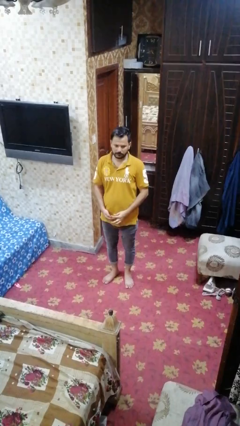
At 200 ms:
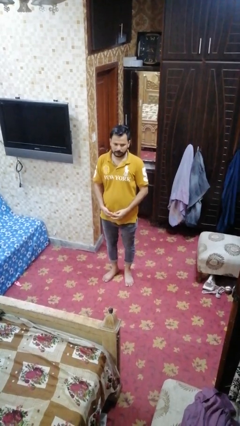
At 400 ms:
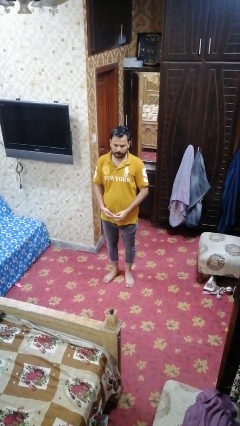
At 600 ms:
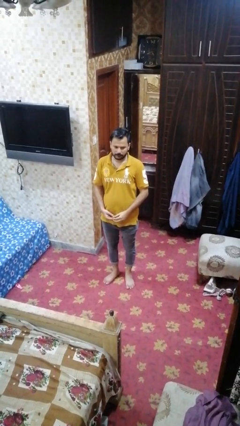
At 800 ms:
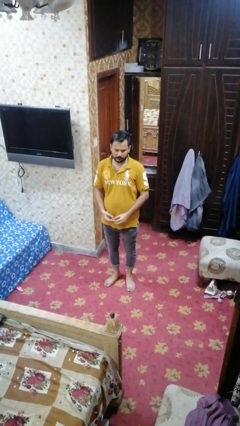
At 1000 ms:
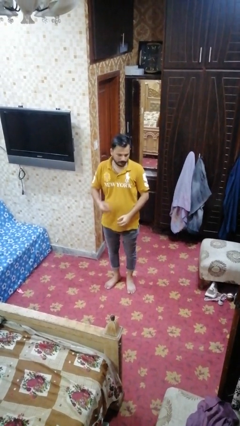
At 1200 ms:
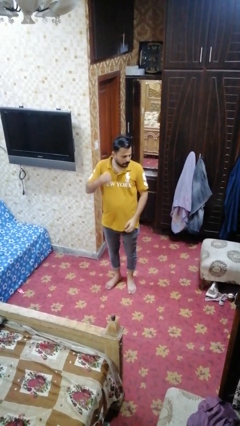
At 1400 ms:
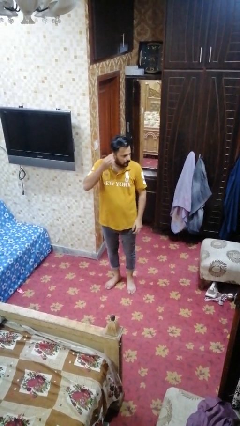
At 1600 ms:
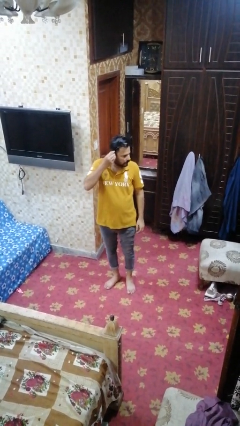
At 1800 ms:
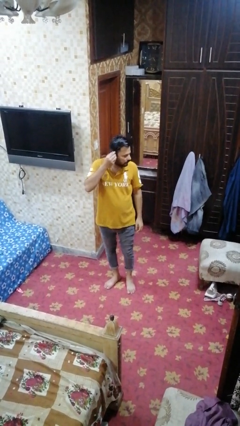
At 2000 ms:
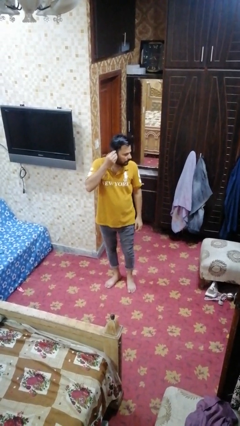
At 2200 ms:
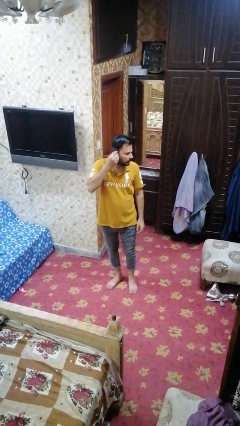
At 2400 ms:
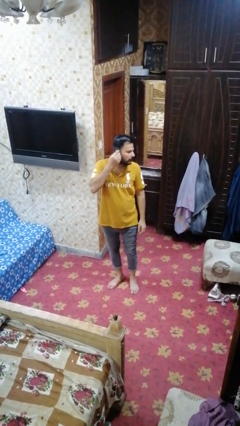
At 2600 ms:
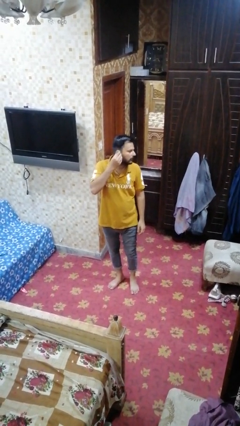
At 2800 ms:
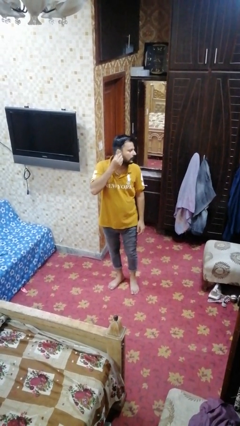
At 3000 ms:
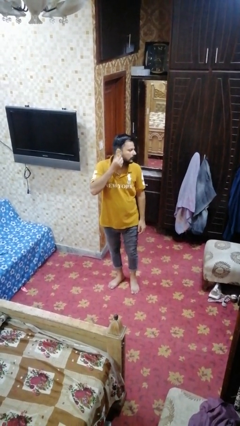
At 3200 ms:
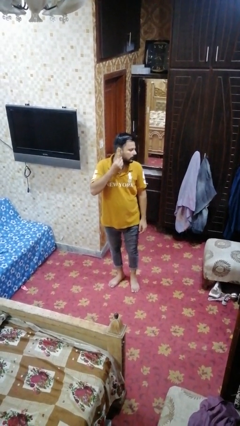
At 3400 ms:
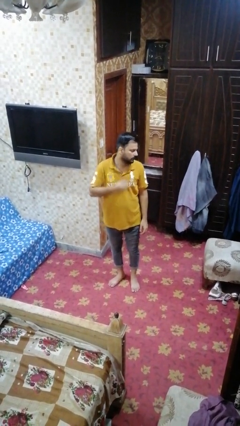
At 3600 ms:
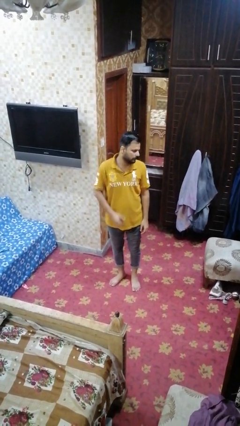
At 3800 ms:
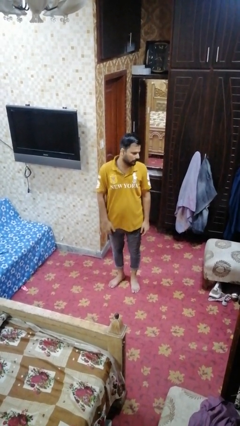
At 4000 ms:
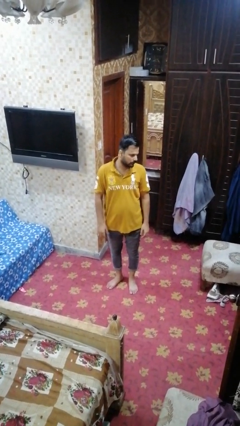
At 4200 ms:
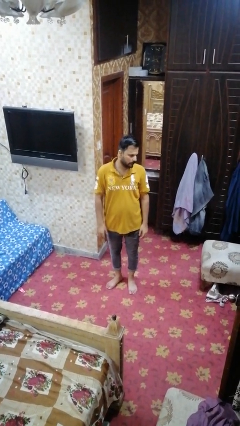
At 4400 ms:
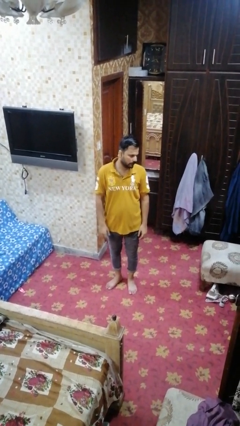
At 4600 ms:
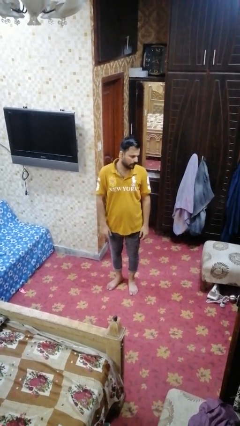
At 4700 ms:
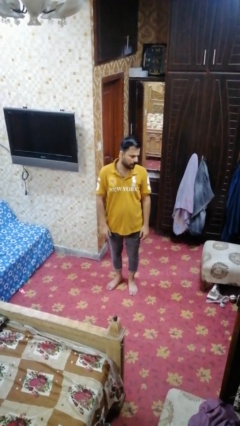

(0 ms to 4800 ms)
person puts on earrings

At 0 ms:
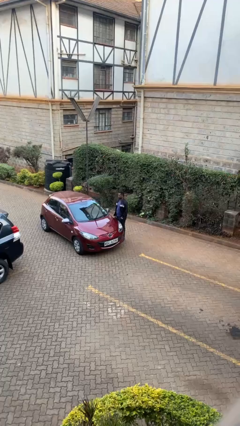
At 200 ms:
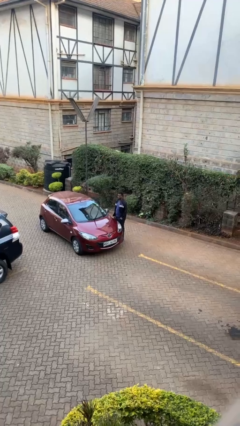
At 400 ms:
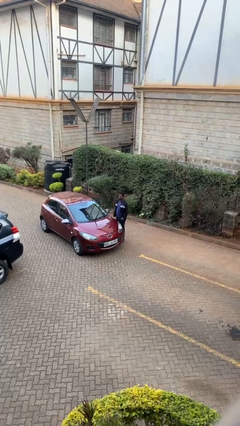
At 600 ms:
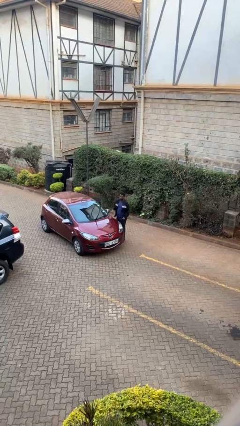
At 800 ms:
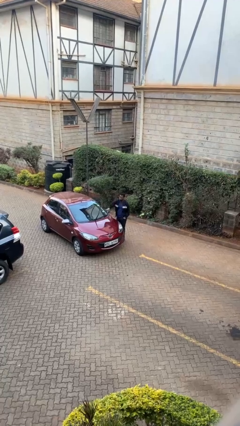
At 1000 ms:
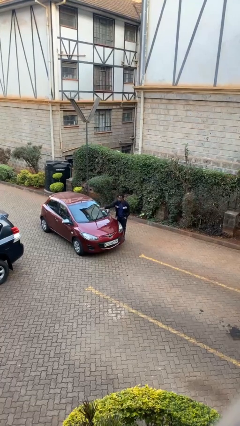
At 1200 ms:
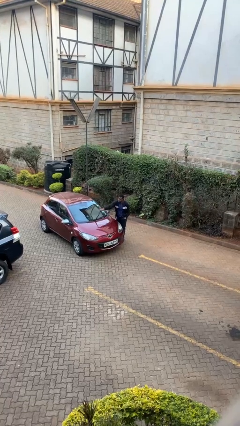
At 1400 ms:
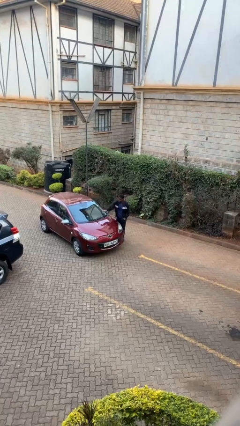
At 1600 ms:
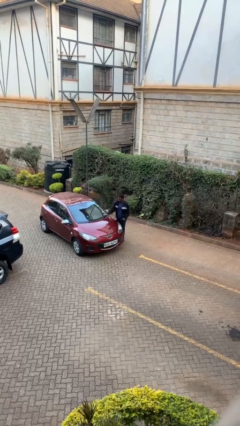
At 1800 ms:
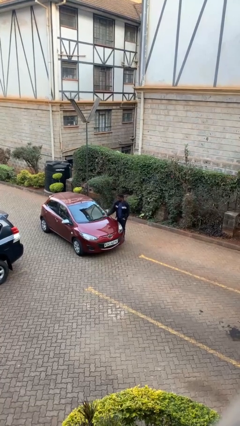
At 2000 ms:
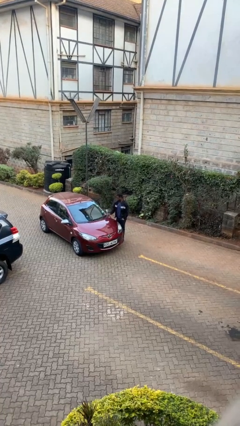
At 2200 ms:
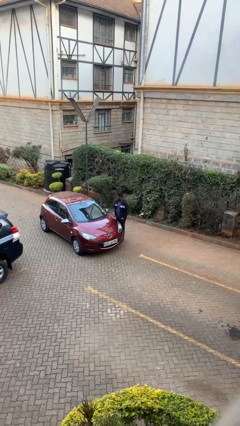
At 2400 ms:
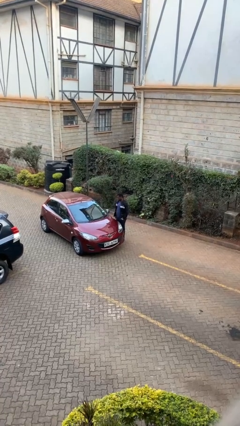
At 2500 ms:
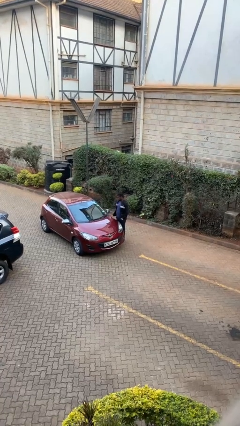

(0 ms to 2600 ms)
person flips down car wipers

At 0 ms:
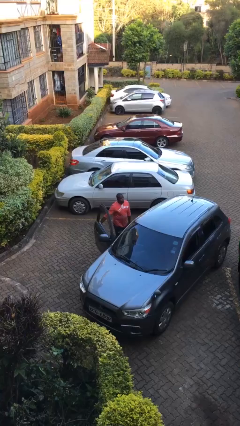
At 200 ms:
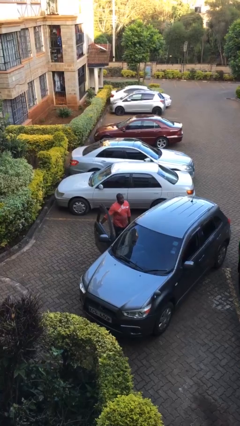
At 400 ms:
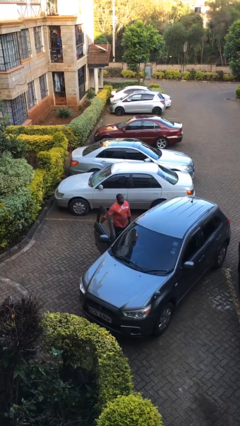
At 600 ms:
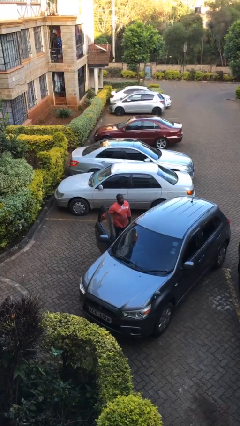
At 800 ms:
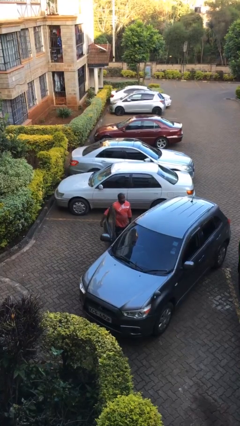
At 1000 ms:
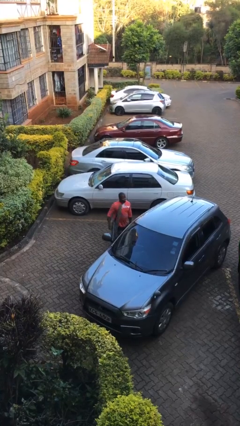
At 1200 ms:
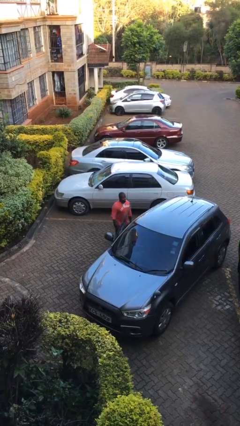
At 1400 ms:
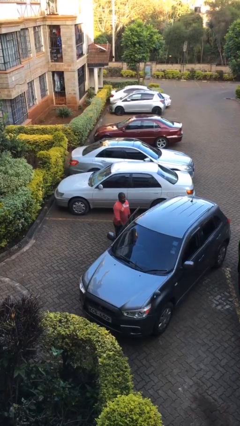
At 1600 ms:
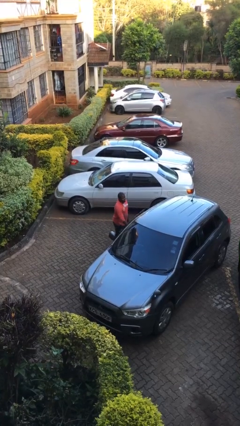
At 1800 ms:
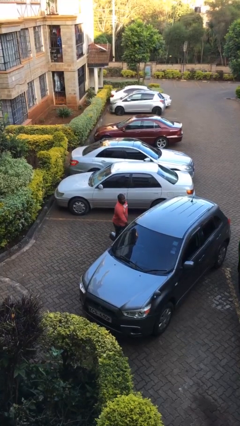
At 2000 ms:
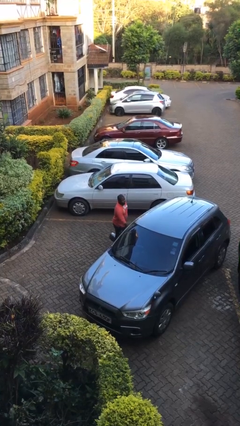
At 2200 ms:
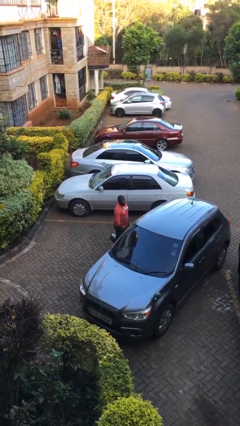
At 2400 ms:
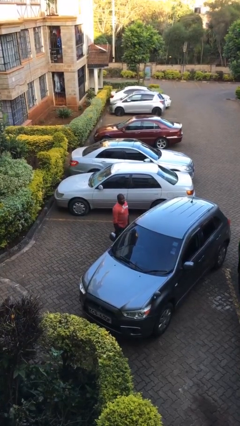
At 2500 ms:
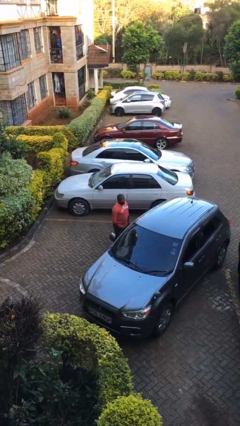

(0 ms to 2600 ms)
person closes car door

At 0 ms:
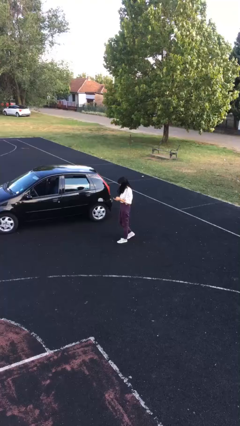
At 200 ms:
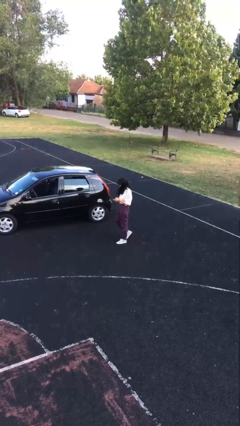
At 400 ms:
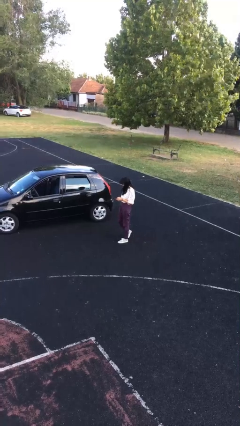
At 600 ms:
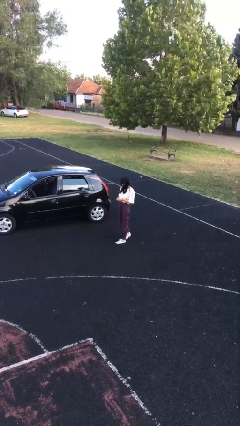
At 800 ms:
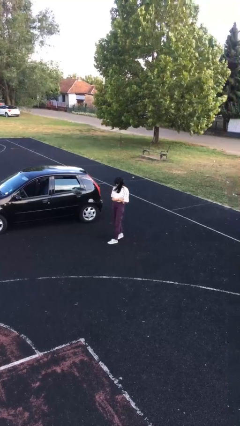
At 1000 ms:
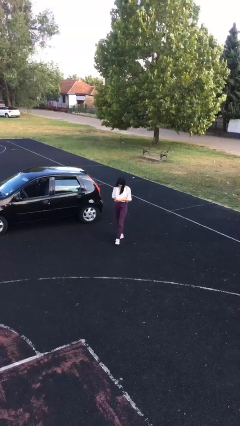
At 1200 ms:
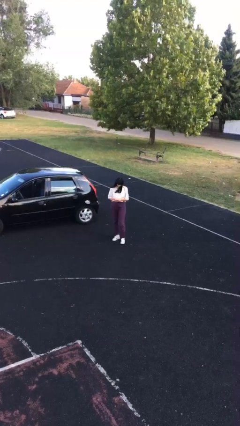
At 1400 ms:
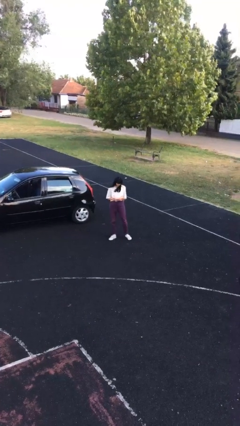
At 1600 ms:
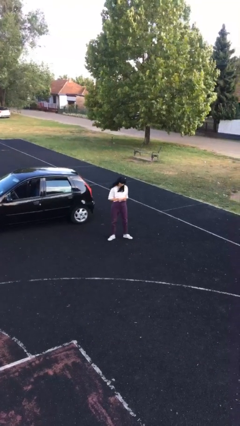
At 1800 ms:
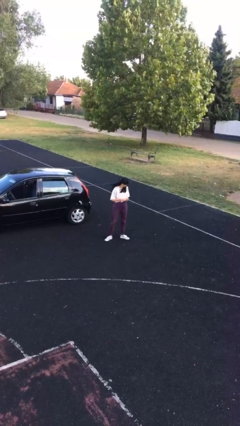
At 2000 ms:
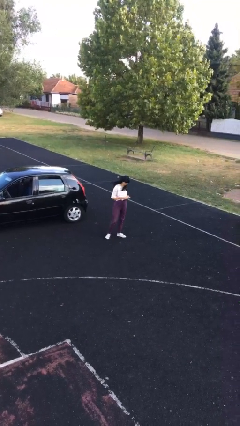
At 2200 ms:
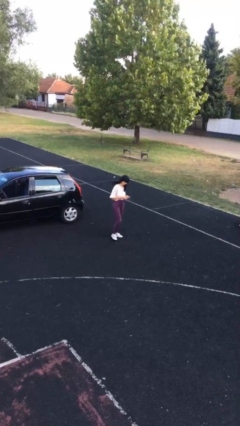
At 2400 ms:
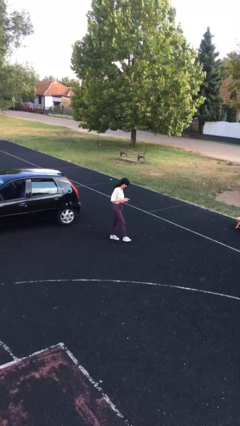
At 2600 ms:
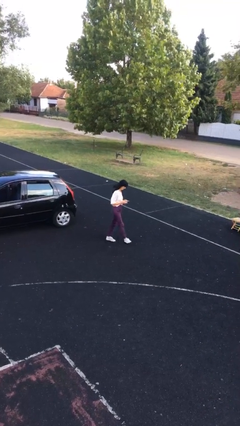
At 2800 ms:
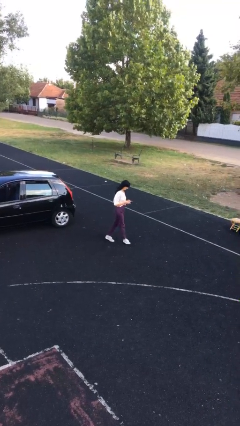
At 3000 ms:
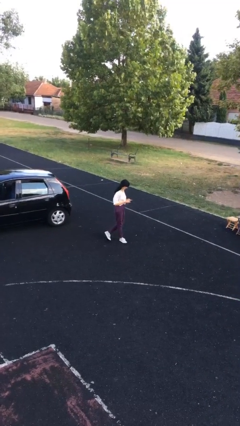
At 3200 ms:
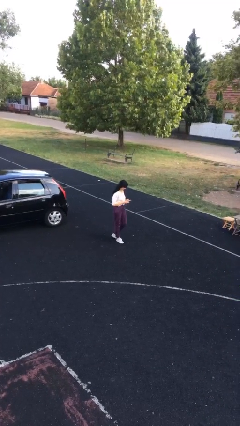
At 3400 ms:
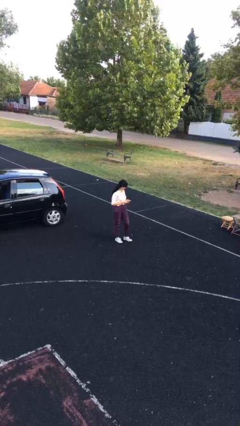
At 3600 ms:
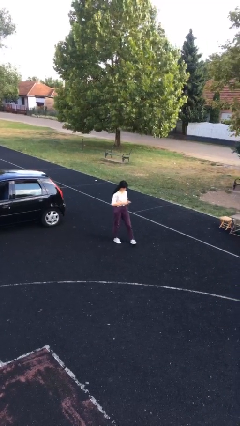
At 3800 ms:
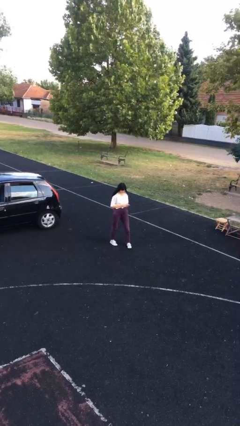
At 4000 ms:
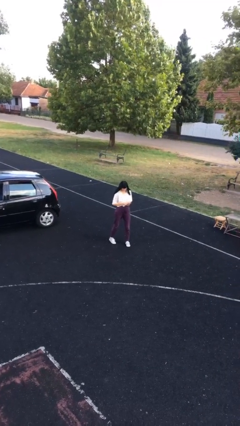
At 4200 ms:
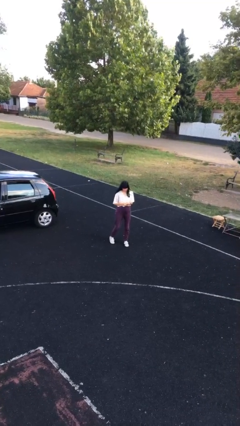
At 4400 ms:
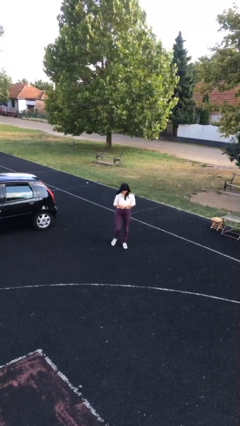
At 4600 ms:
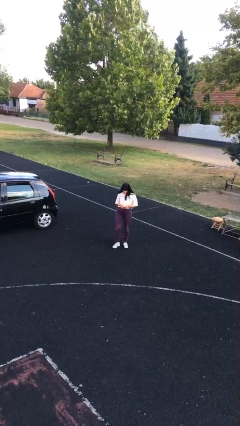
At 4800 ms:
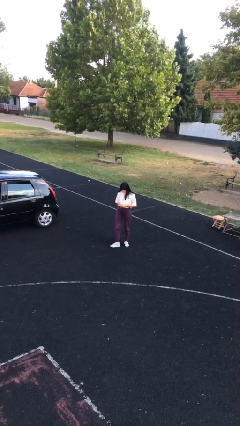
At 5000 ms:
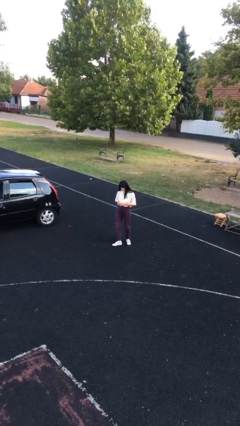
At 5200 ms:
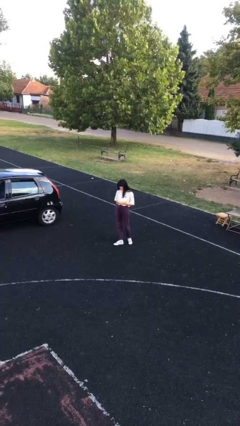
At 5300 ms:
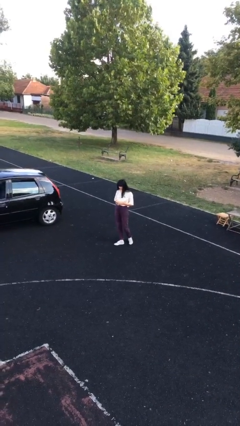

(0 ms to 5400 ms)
person texts on phone

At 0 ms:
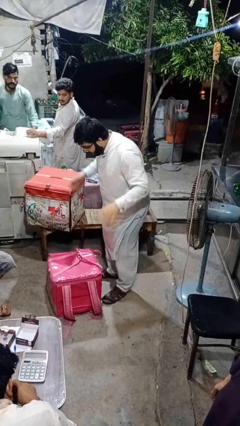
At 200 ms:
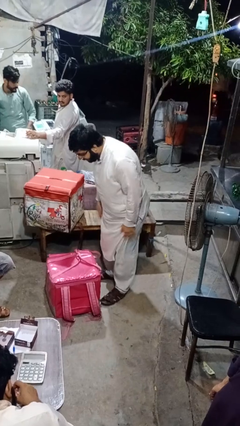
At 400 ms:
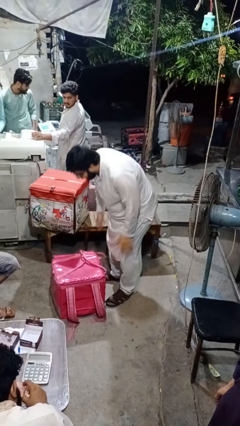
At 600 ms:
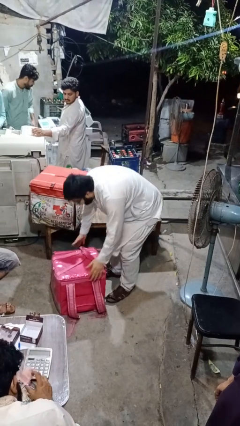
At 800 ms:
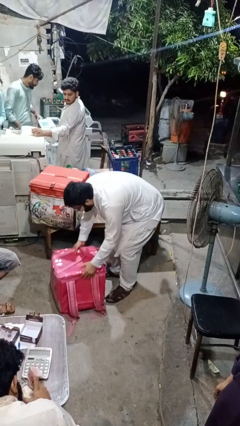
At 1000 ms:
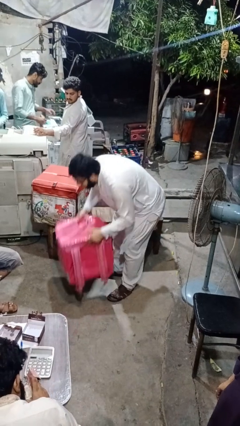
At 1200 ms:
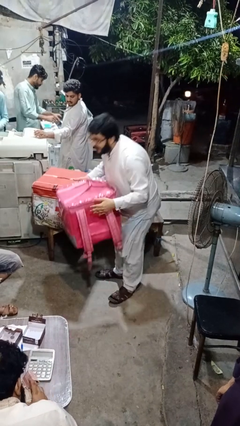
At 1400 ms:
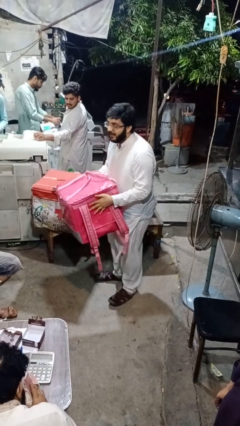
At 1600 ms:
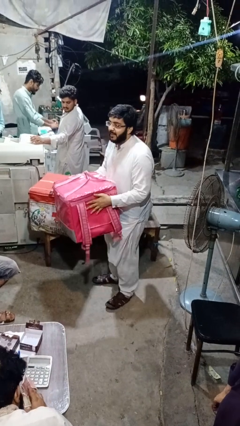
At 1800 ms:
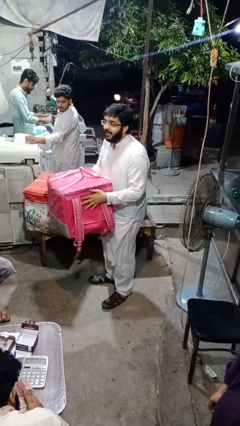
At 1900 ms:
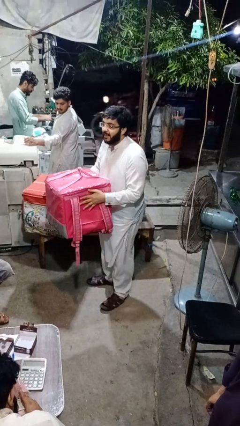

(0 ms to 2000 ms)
person picks up object from floor

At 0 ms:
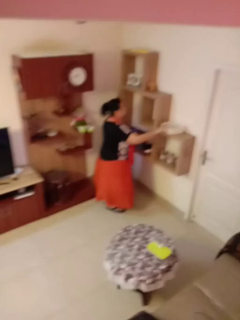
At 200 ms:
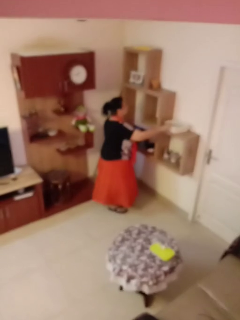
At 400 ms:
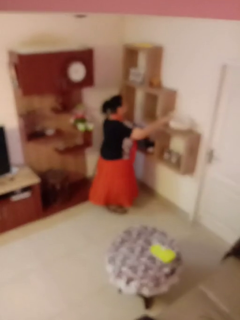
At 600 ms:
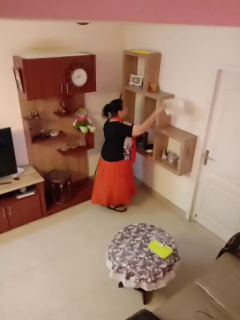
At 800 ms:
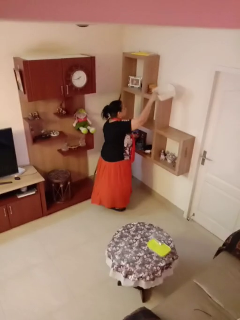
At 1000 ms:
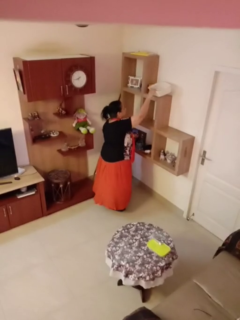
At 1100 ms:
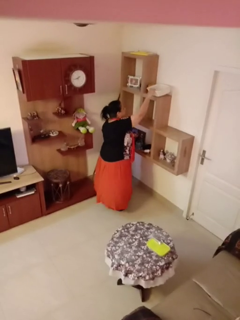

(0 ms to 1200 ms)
person picks up object from shelf
